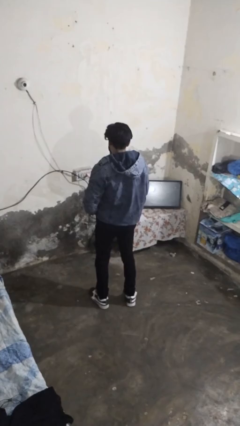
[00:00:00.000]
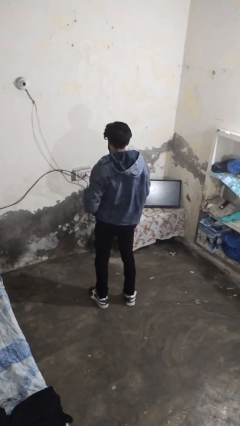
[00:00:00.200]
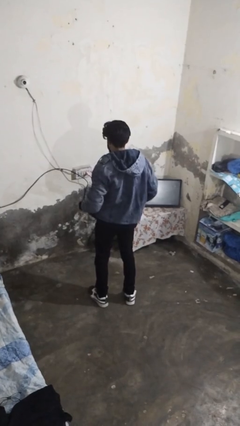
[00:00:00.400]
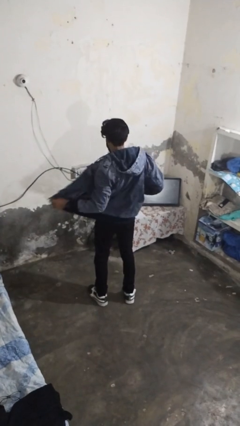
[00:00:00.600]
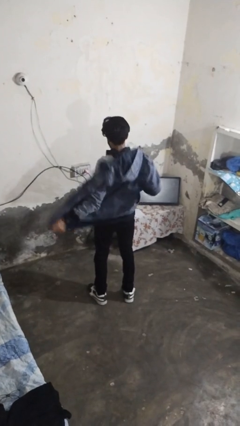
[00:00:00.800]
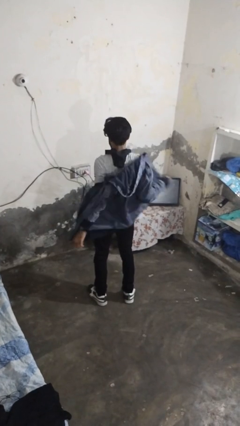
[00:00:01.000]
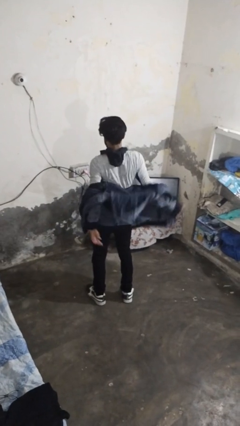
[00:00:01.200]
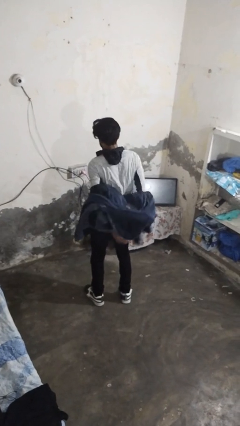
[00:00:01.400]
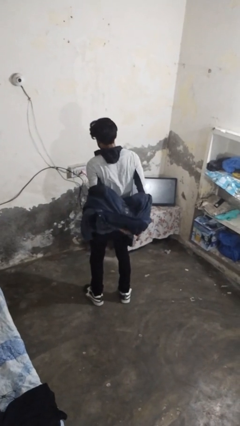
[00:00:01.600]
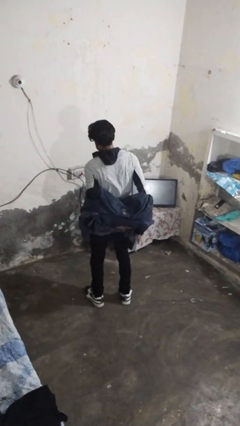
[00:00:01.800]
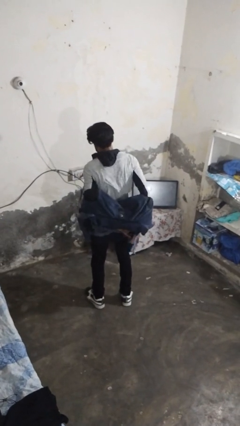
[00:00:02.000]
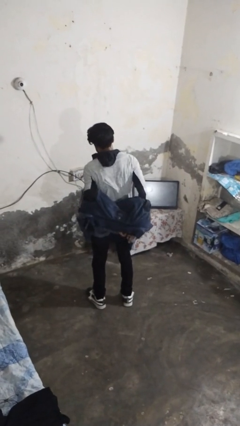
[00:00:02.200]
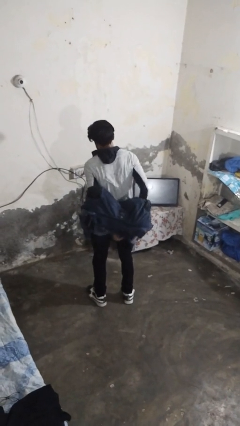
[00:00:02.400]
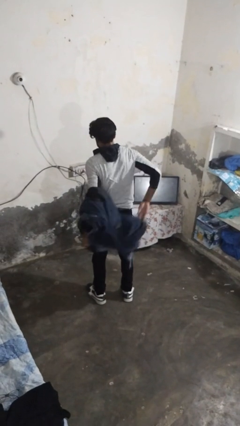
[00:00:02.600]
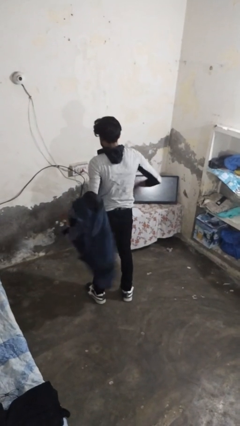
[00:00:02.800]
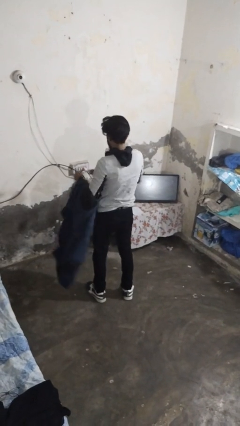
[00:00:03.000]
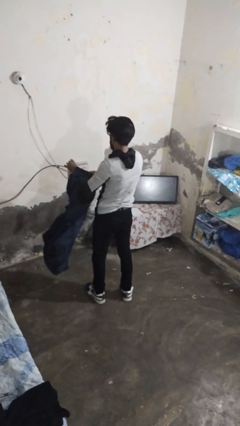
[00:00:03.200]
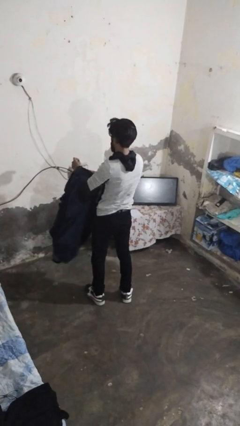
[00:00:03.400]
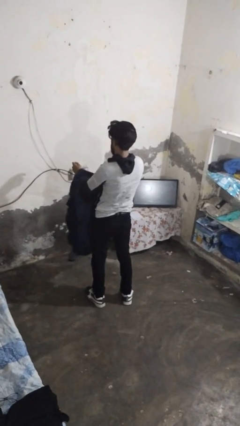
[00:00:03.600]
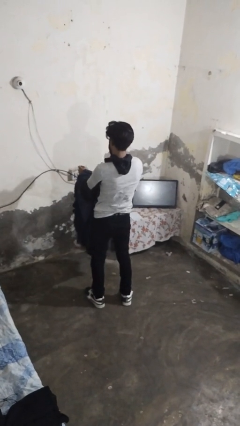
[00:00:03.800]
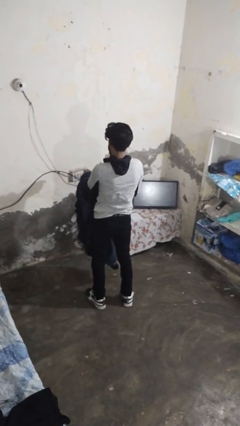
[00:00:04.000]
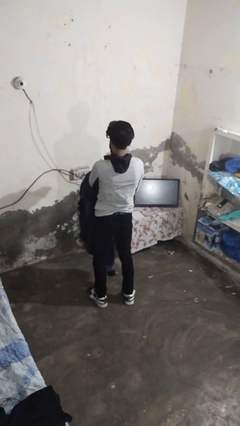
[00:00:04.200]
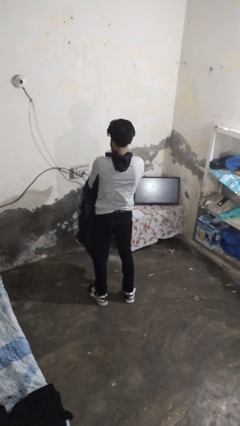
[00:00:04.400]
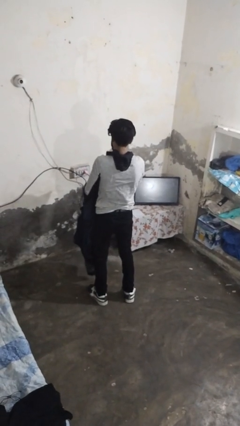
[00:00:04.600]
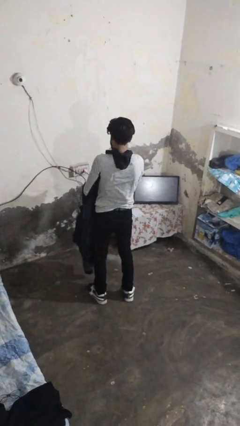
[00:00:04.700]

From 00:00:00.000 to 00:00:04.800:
person takes off jacket

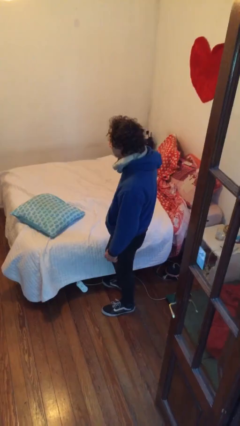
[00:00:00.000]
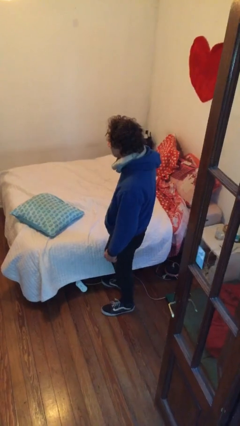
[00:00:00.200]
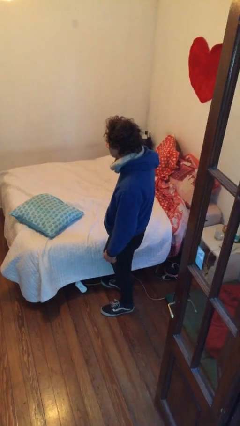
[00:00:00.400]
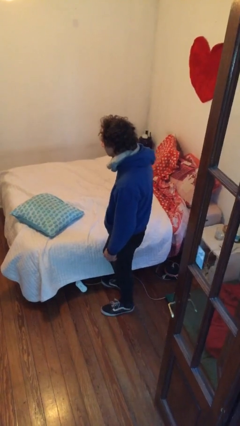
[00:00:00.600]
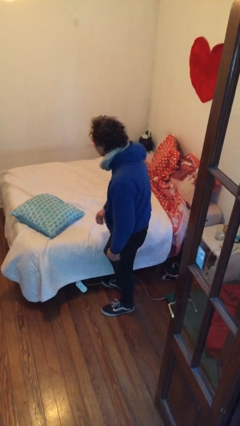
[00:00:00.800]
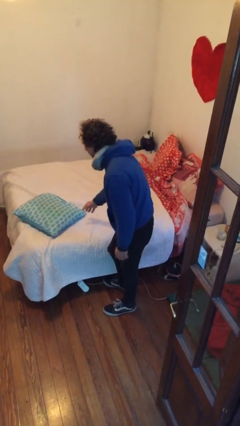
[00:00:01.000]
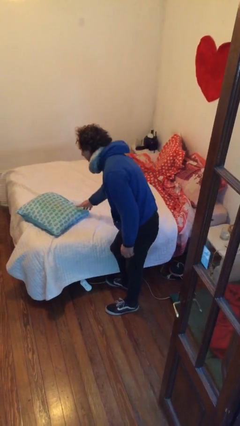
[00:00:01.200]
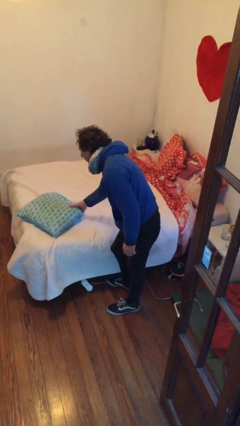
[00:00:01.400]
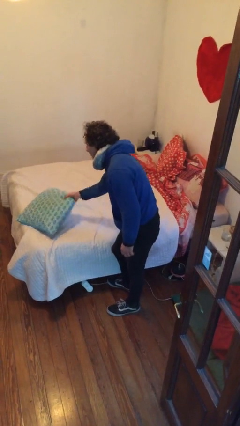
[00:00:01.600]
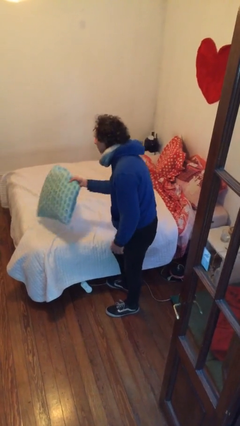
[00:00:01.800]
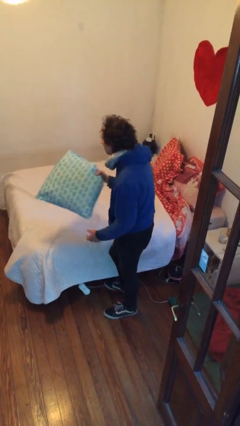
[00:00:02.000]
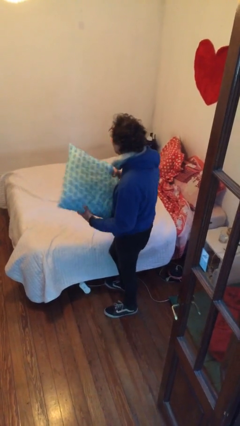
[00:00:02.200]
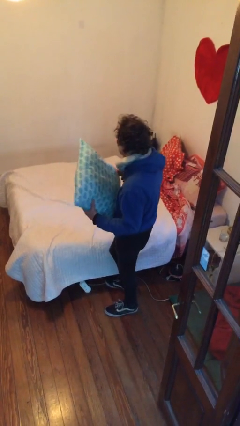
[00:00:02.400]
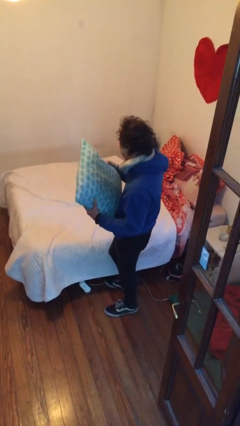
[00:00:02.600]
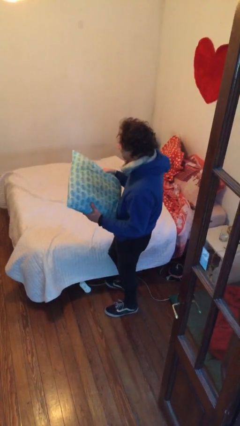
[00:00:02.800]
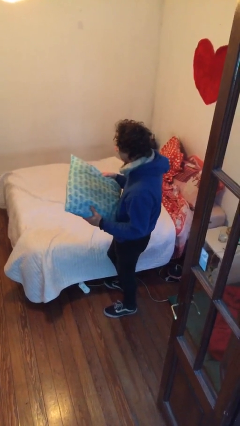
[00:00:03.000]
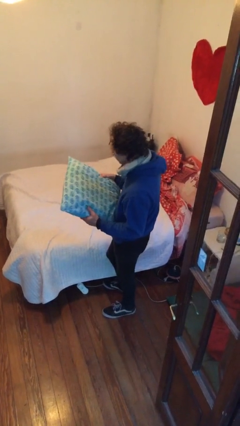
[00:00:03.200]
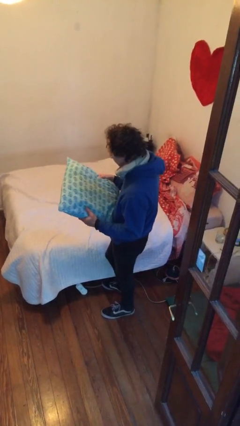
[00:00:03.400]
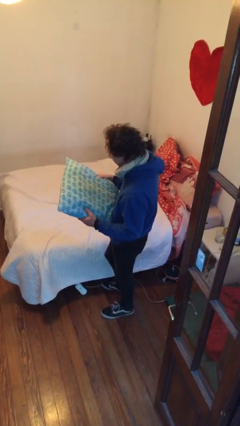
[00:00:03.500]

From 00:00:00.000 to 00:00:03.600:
person picks up object from bed

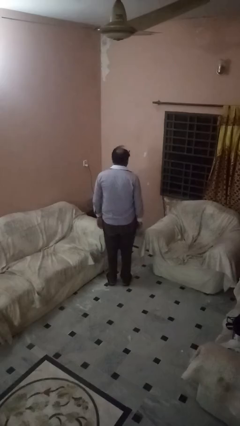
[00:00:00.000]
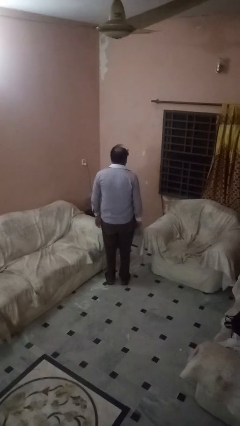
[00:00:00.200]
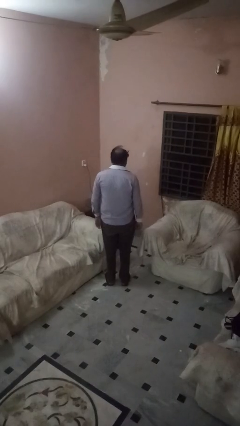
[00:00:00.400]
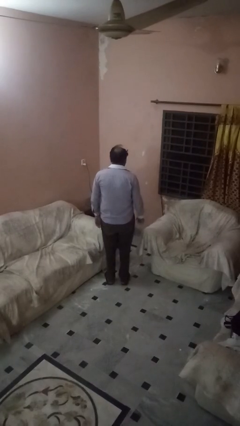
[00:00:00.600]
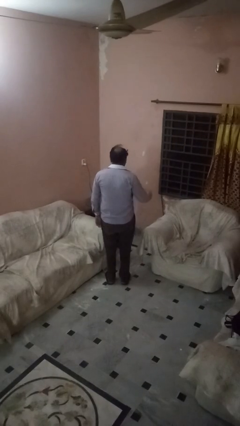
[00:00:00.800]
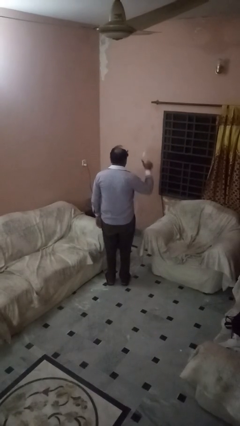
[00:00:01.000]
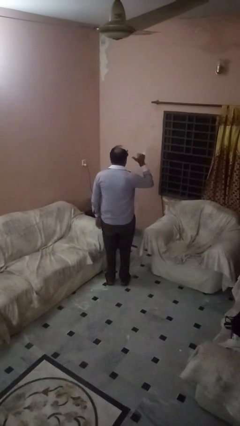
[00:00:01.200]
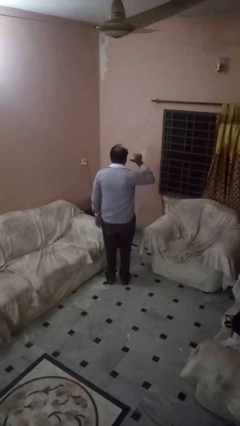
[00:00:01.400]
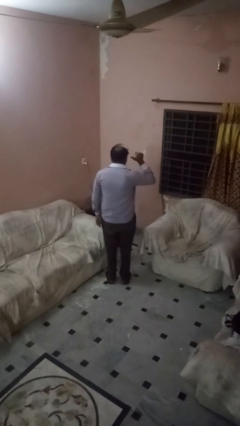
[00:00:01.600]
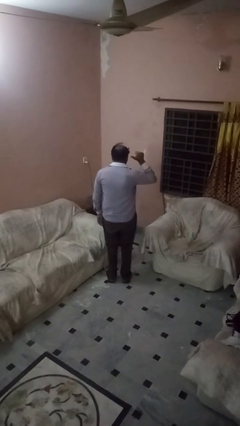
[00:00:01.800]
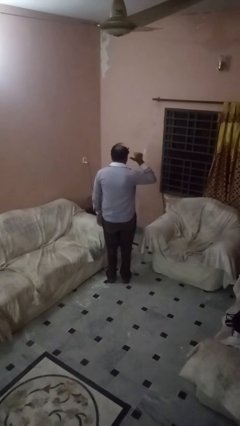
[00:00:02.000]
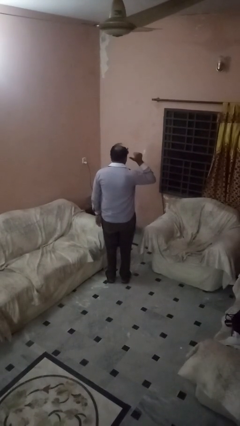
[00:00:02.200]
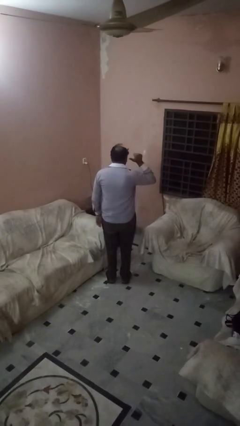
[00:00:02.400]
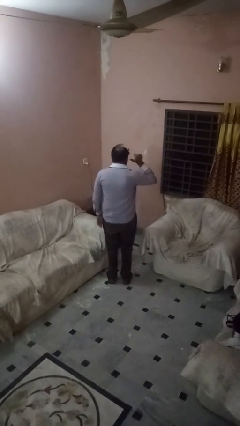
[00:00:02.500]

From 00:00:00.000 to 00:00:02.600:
person gestures behind me

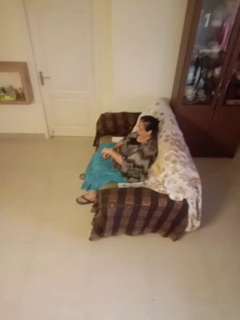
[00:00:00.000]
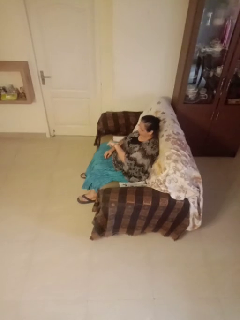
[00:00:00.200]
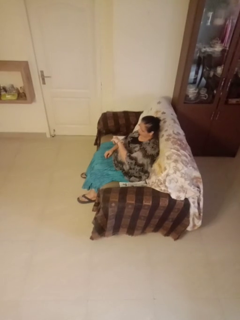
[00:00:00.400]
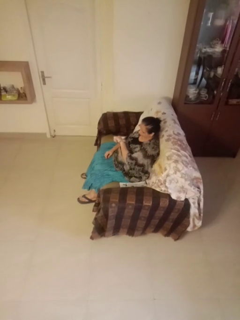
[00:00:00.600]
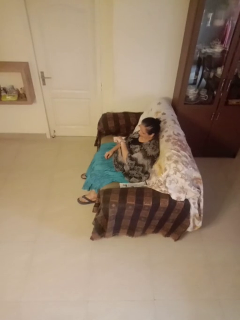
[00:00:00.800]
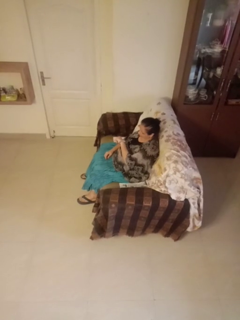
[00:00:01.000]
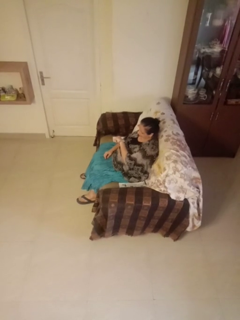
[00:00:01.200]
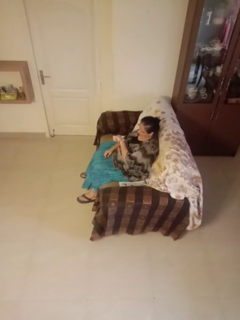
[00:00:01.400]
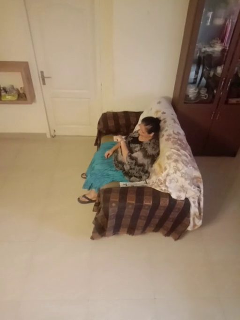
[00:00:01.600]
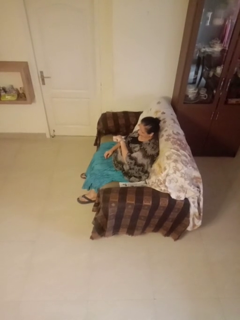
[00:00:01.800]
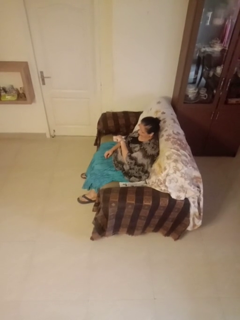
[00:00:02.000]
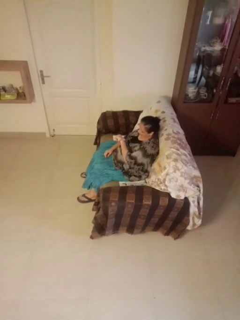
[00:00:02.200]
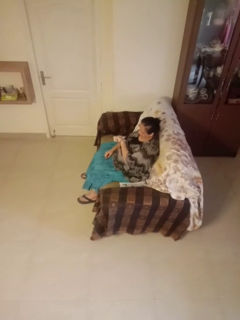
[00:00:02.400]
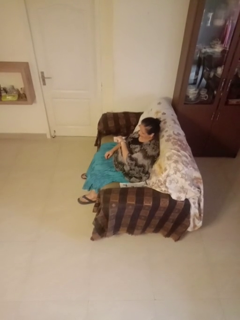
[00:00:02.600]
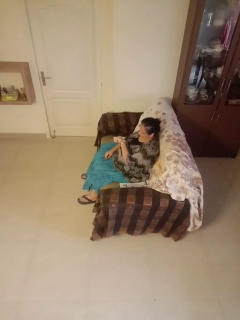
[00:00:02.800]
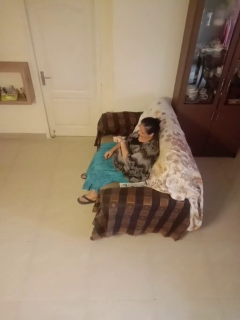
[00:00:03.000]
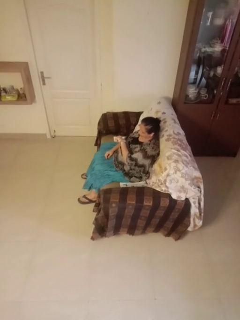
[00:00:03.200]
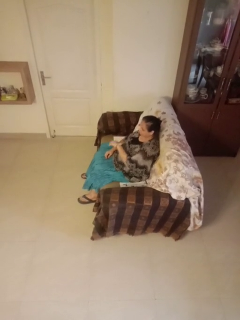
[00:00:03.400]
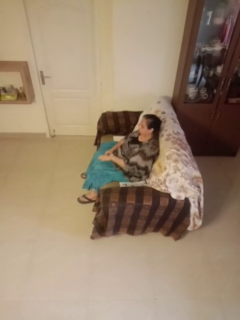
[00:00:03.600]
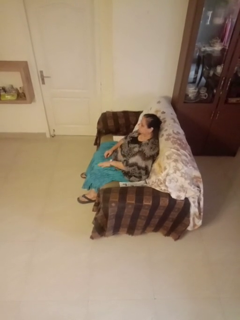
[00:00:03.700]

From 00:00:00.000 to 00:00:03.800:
person looks at wristwatch

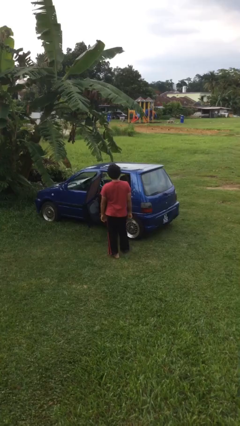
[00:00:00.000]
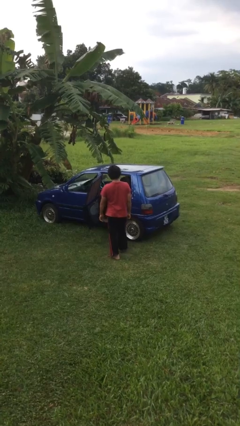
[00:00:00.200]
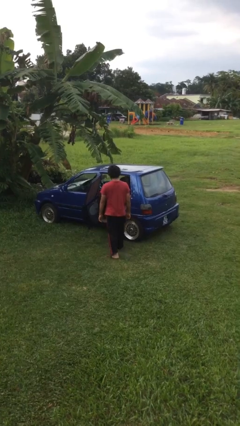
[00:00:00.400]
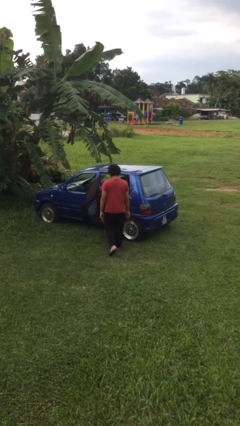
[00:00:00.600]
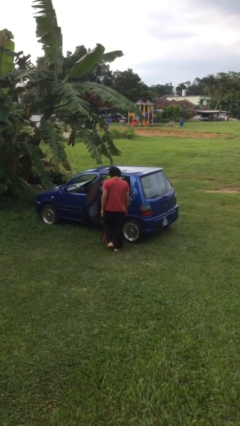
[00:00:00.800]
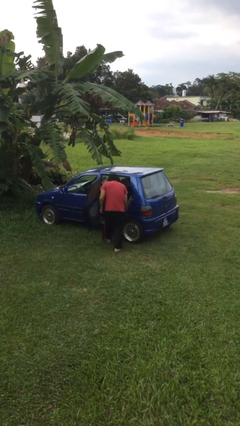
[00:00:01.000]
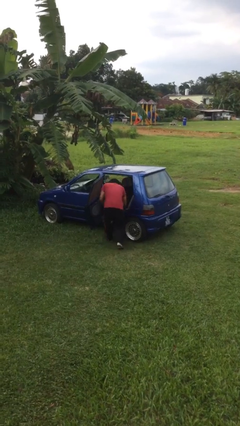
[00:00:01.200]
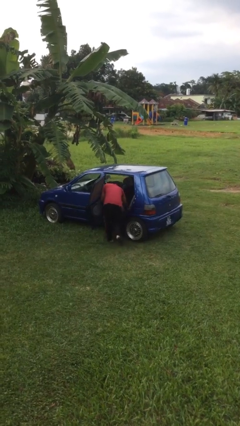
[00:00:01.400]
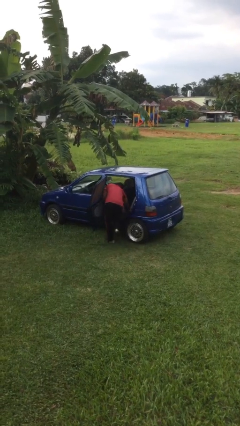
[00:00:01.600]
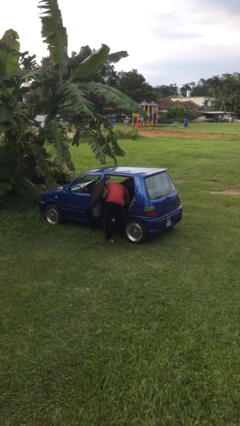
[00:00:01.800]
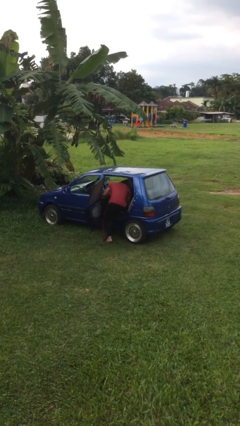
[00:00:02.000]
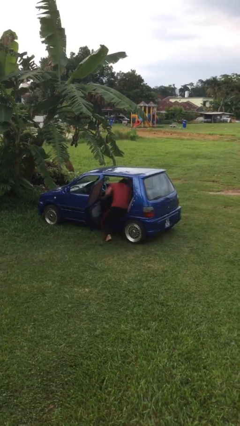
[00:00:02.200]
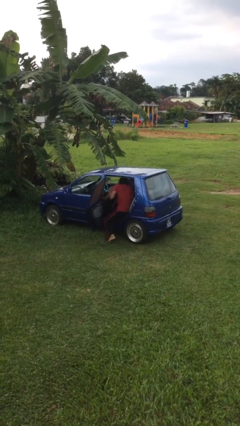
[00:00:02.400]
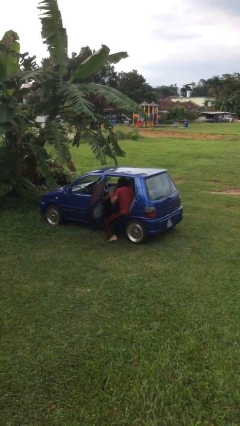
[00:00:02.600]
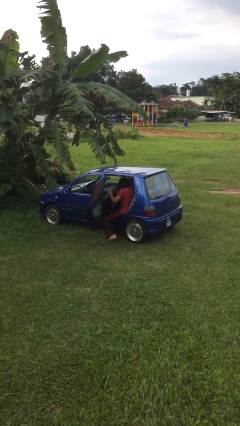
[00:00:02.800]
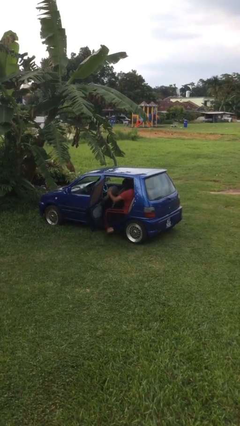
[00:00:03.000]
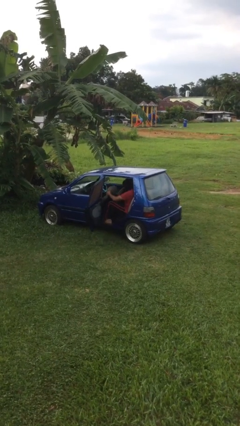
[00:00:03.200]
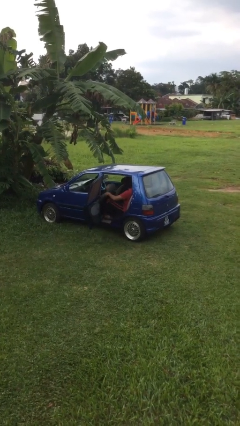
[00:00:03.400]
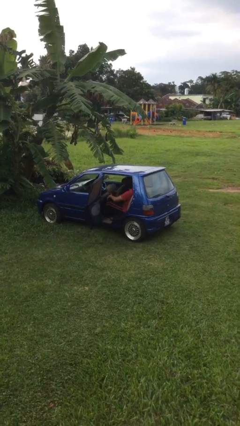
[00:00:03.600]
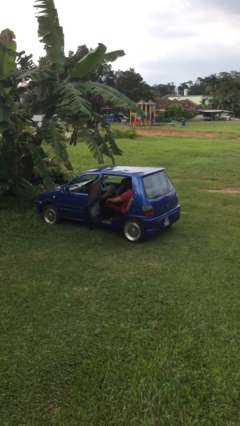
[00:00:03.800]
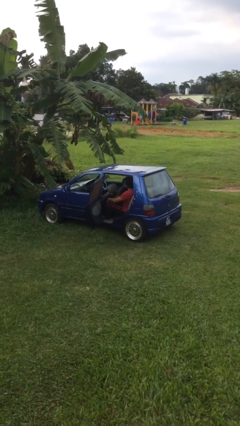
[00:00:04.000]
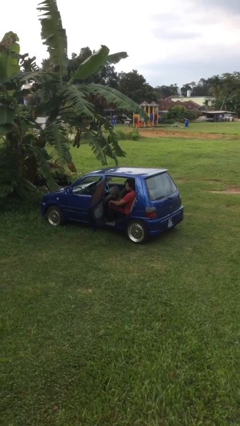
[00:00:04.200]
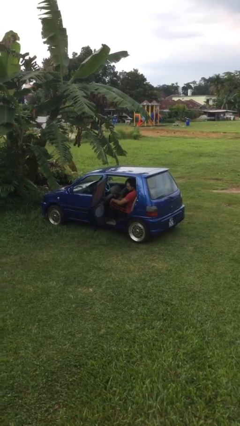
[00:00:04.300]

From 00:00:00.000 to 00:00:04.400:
person enters car
